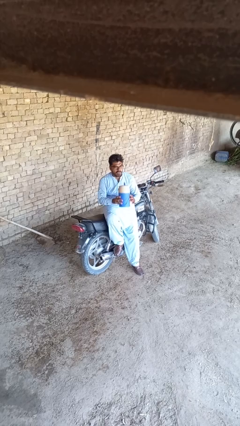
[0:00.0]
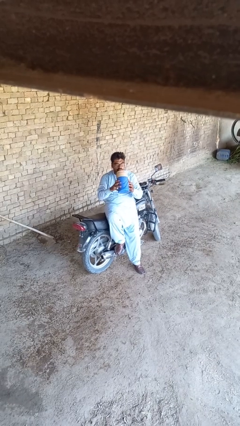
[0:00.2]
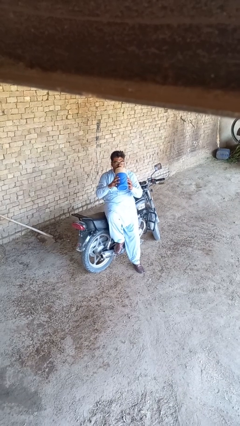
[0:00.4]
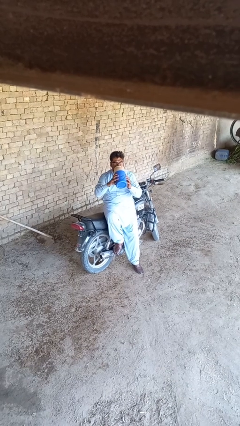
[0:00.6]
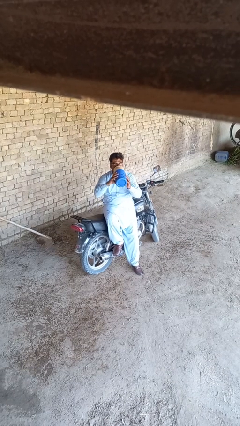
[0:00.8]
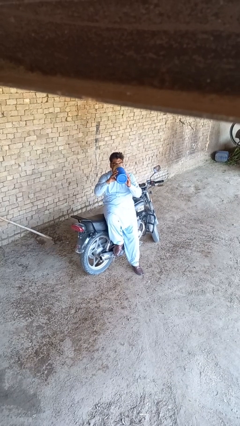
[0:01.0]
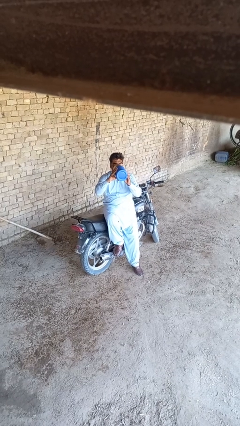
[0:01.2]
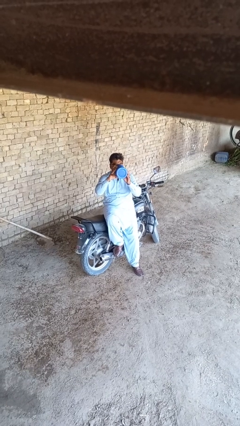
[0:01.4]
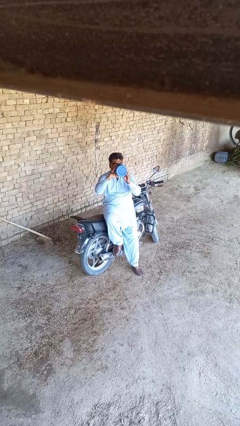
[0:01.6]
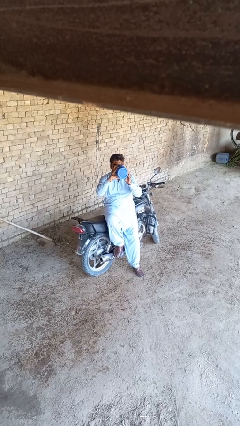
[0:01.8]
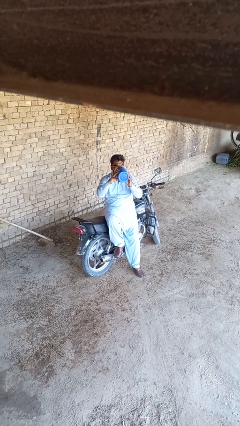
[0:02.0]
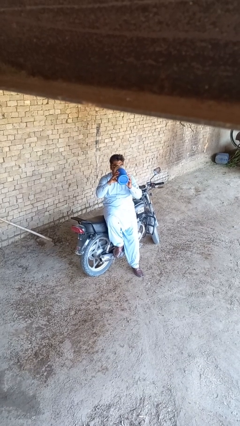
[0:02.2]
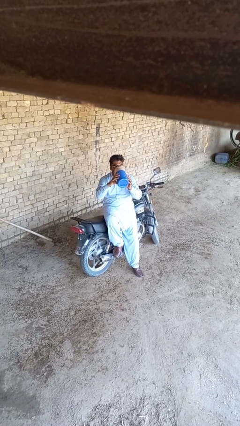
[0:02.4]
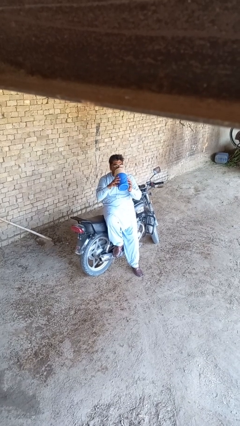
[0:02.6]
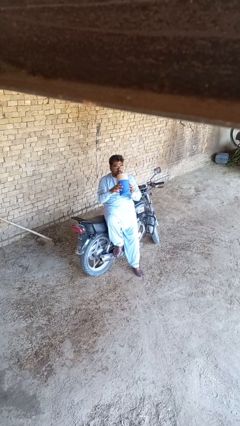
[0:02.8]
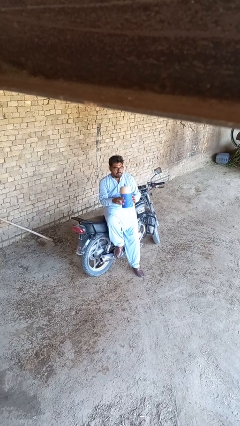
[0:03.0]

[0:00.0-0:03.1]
person drinks from bottle

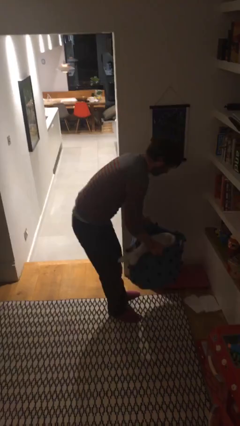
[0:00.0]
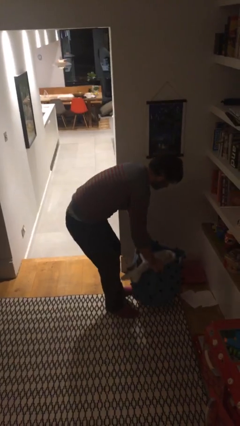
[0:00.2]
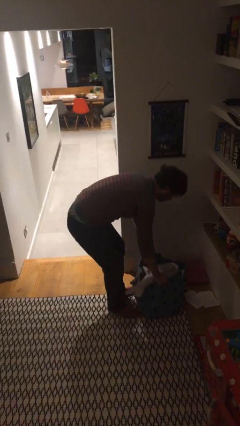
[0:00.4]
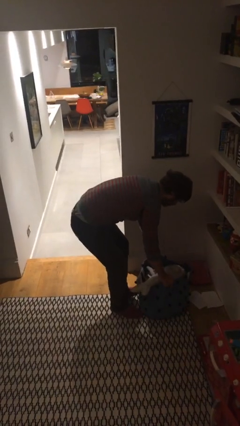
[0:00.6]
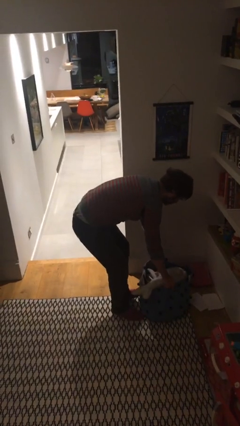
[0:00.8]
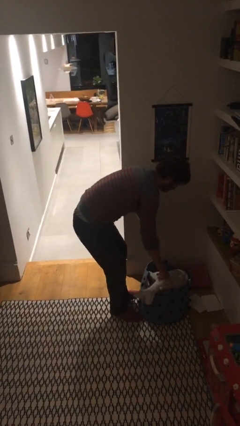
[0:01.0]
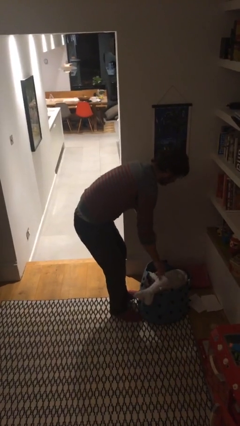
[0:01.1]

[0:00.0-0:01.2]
person puts down object on floor

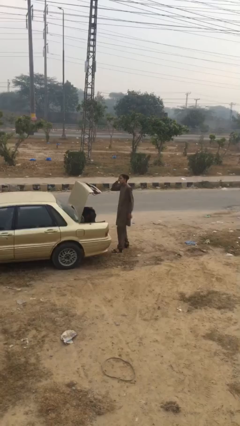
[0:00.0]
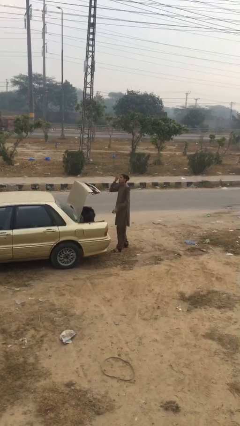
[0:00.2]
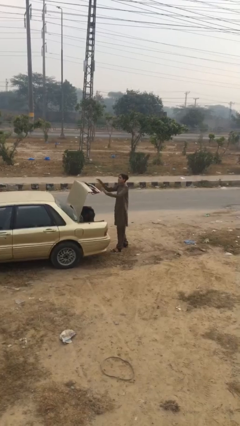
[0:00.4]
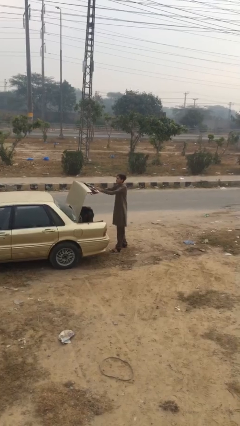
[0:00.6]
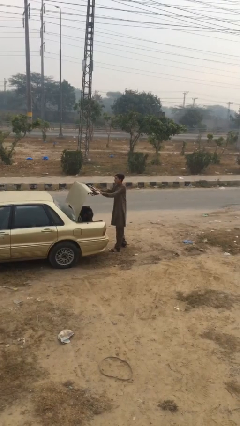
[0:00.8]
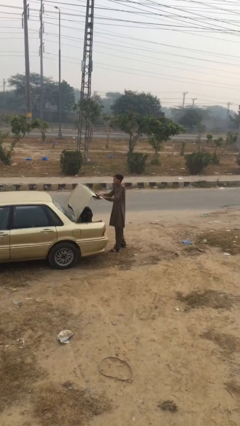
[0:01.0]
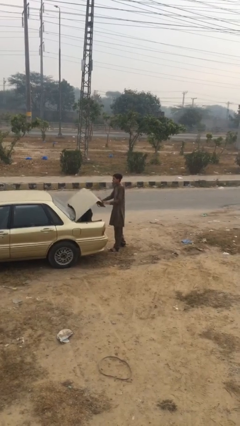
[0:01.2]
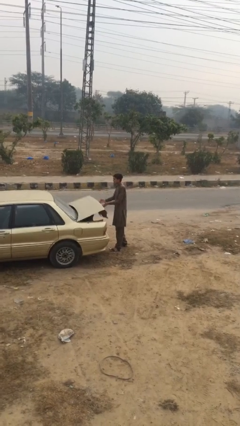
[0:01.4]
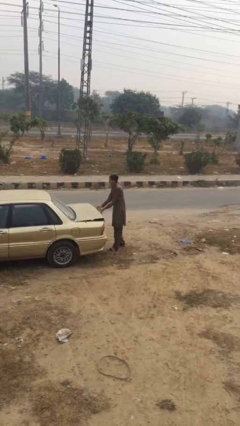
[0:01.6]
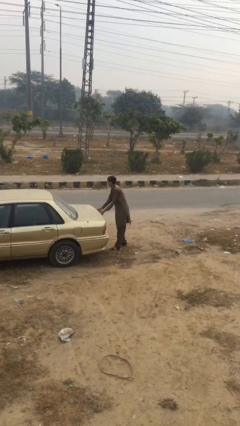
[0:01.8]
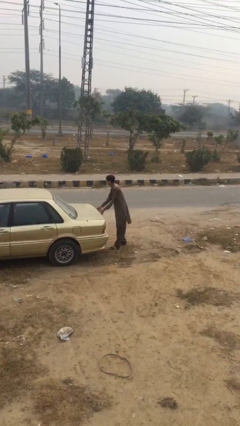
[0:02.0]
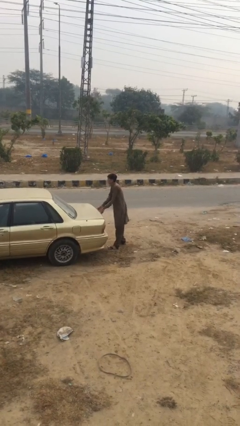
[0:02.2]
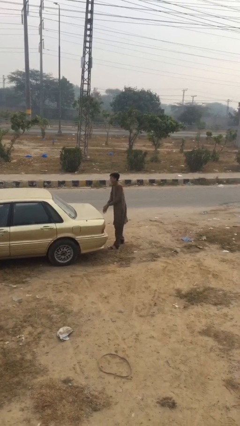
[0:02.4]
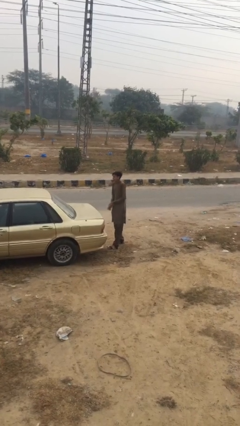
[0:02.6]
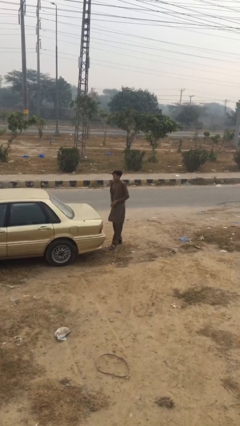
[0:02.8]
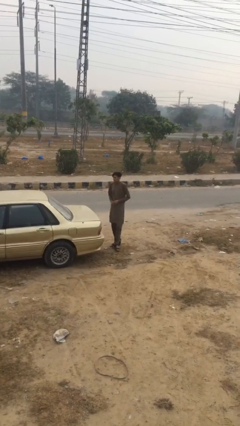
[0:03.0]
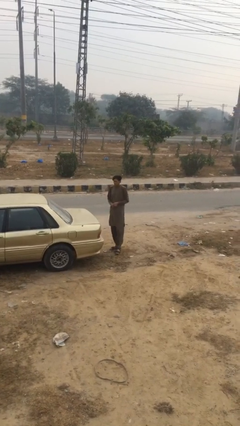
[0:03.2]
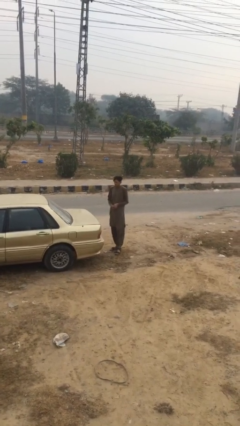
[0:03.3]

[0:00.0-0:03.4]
person closes car trunk

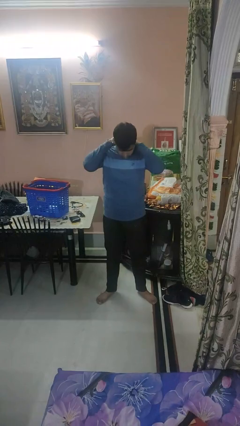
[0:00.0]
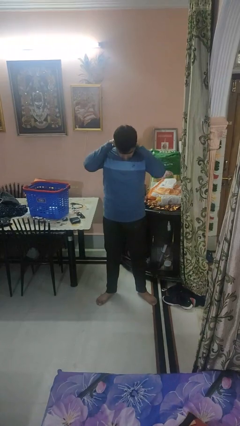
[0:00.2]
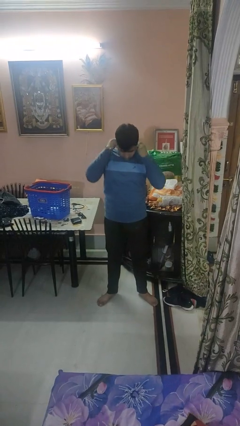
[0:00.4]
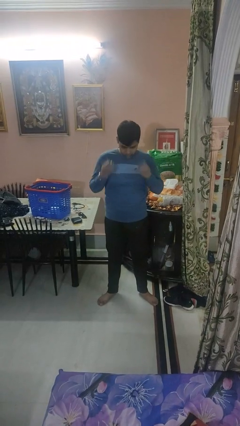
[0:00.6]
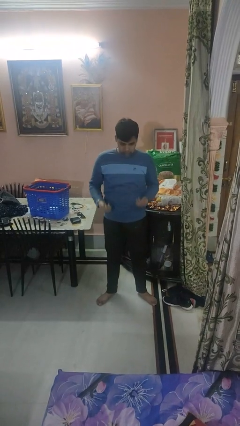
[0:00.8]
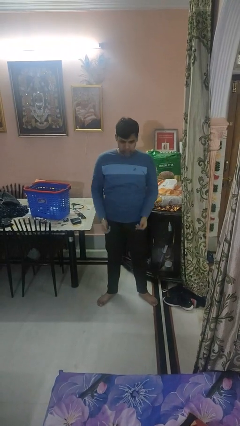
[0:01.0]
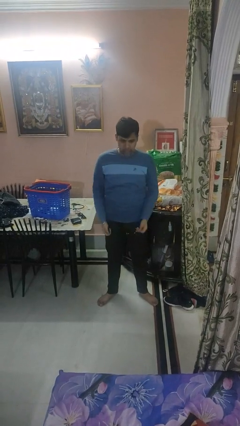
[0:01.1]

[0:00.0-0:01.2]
person takes off necklace

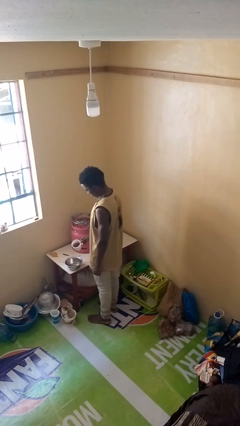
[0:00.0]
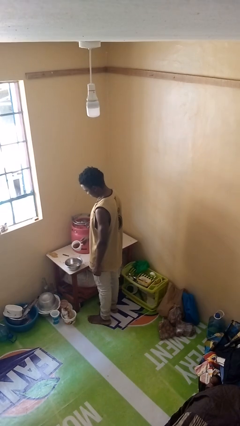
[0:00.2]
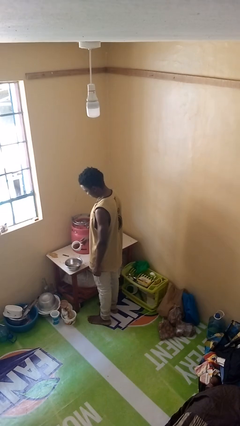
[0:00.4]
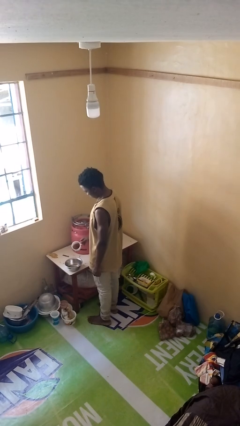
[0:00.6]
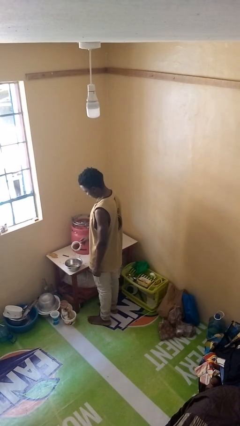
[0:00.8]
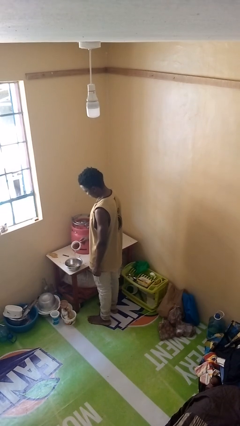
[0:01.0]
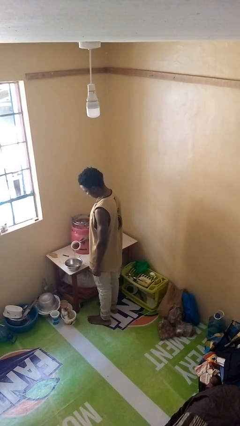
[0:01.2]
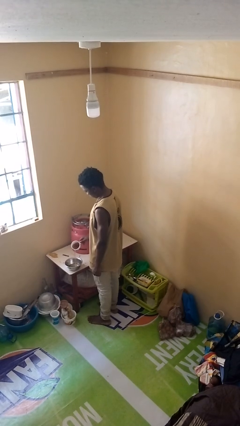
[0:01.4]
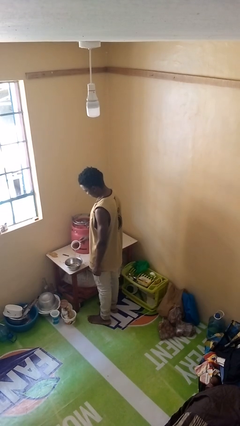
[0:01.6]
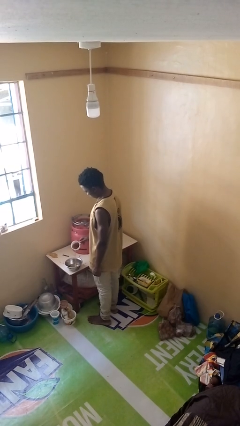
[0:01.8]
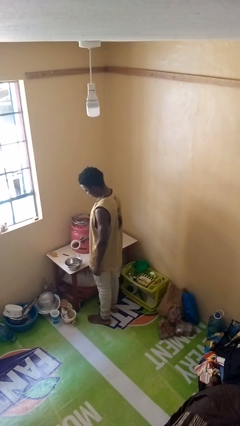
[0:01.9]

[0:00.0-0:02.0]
person pours into bowl

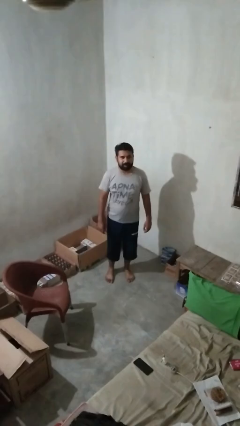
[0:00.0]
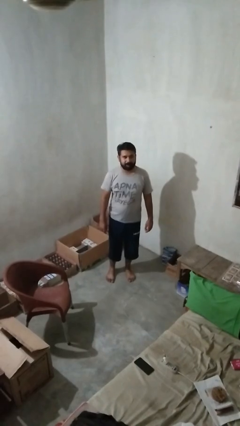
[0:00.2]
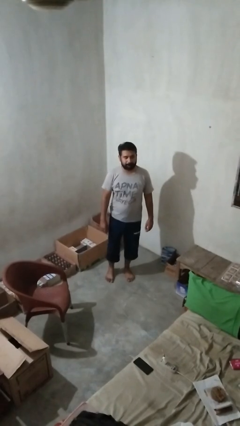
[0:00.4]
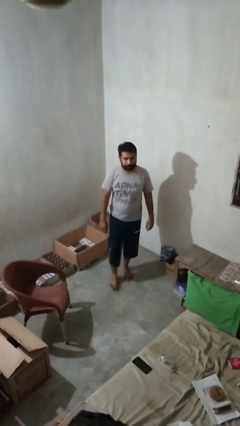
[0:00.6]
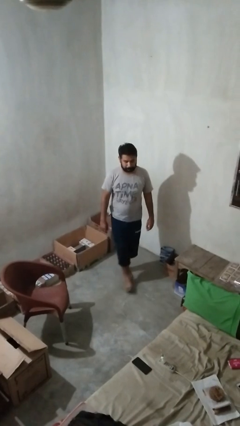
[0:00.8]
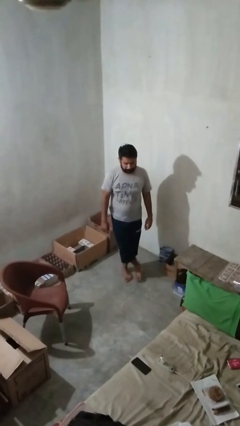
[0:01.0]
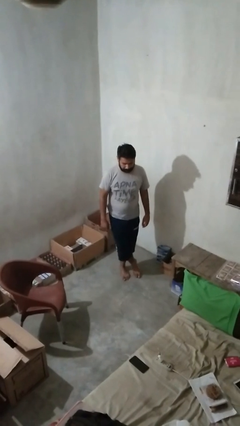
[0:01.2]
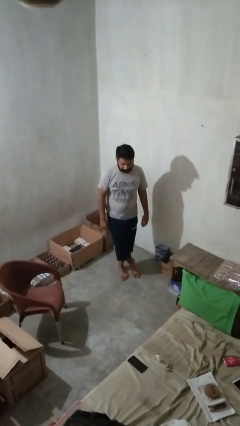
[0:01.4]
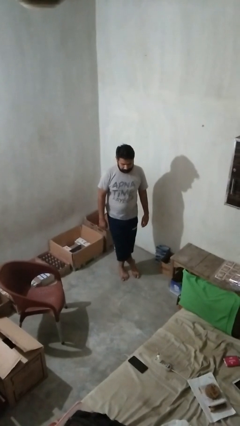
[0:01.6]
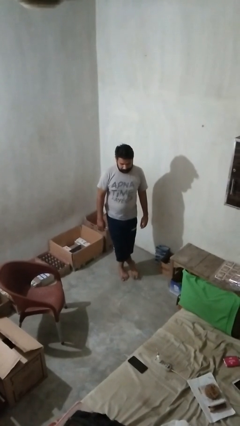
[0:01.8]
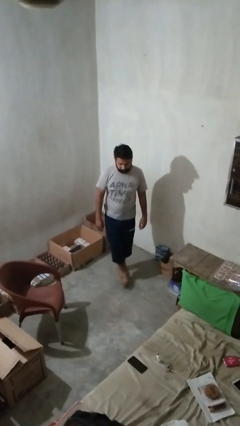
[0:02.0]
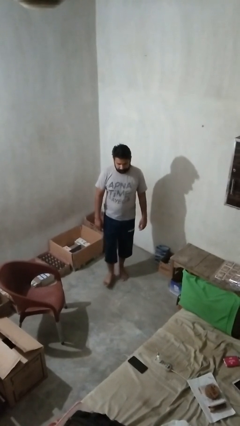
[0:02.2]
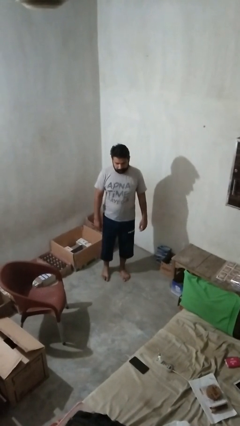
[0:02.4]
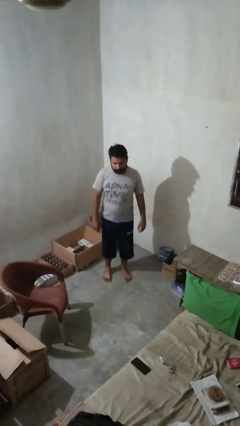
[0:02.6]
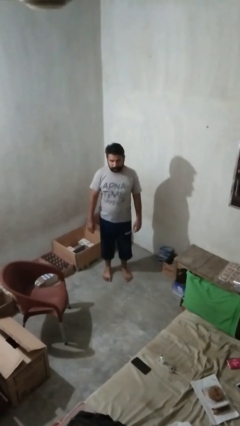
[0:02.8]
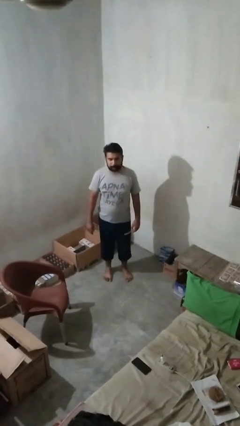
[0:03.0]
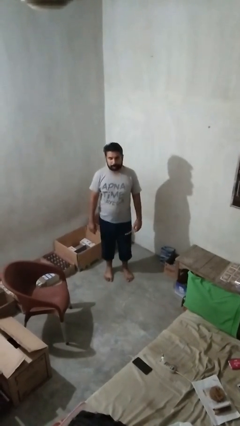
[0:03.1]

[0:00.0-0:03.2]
person crosses legs

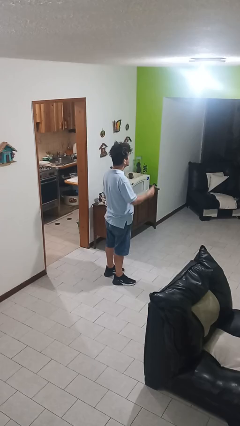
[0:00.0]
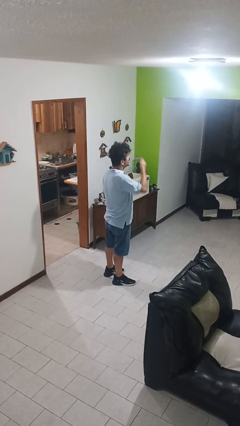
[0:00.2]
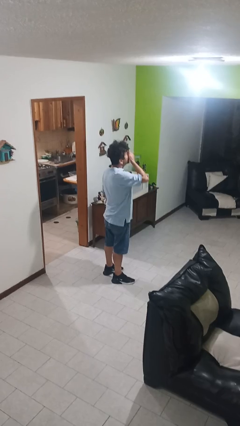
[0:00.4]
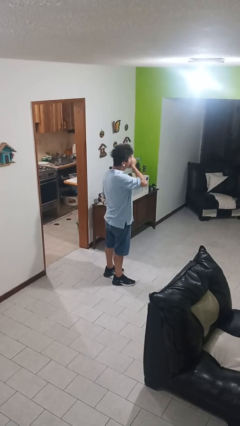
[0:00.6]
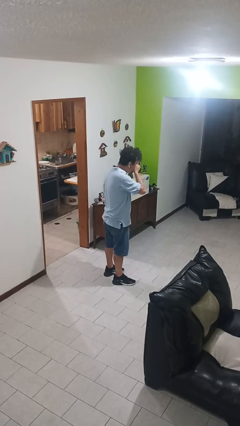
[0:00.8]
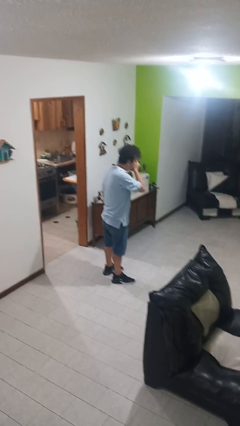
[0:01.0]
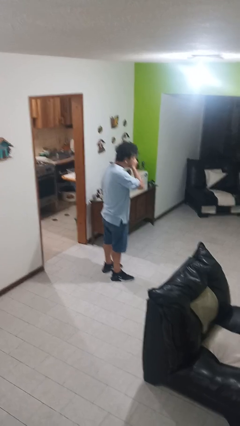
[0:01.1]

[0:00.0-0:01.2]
person sneezes into hand

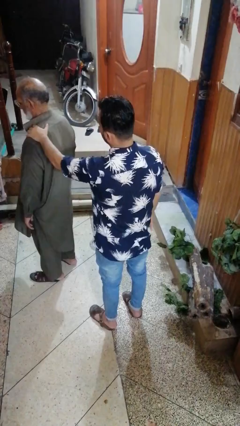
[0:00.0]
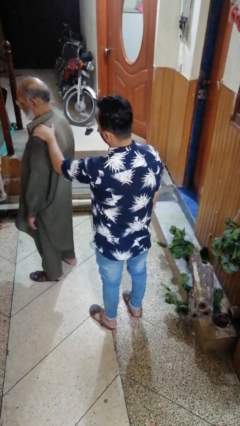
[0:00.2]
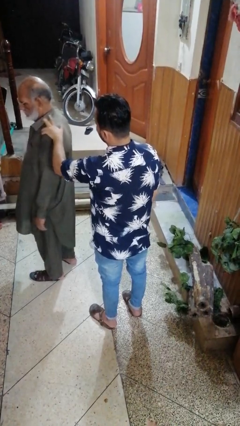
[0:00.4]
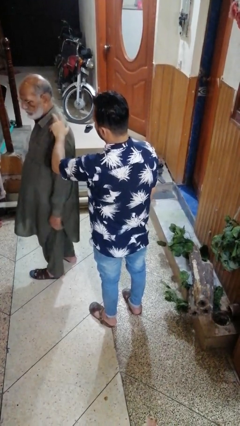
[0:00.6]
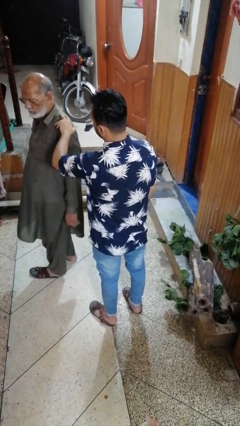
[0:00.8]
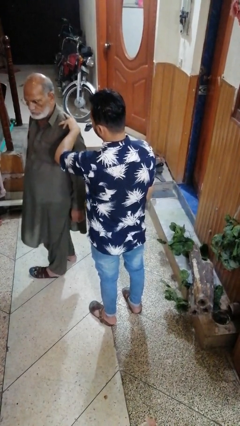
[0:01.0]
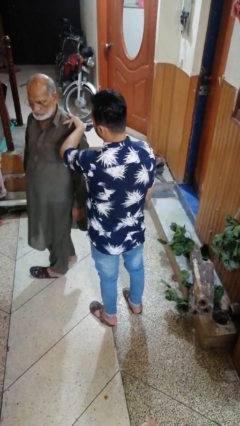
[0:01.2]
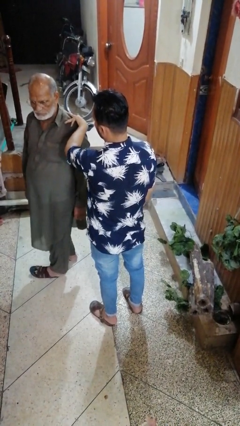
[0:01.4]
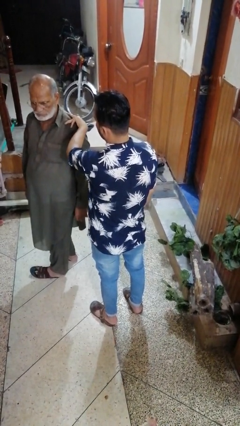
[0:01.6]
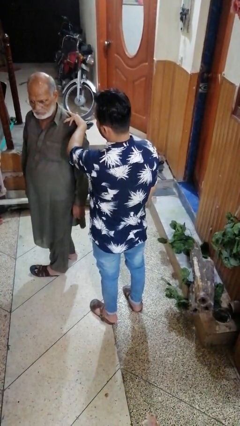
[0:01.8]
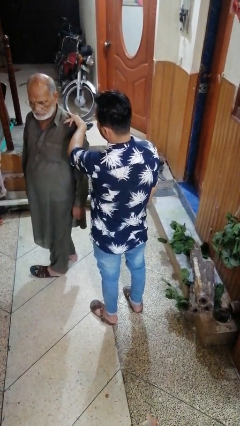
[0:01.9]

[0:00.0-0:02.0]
person spins person around
